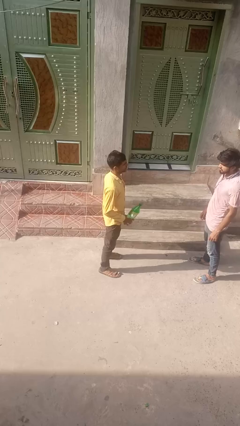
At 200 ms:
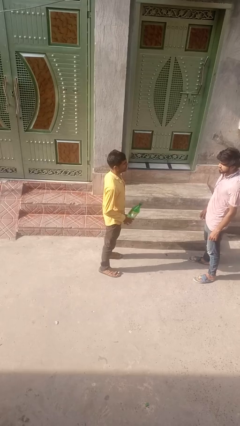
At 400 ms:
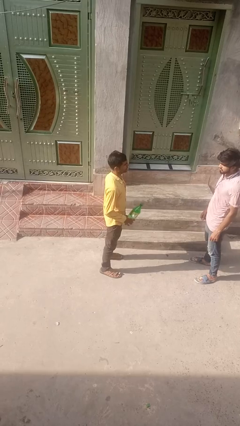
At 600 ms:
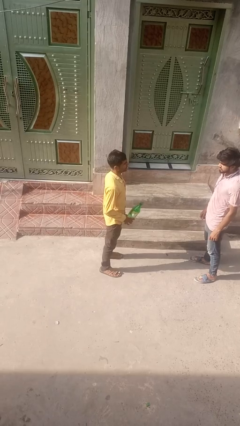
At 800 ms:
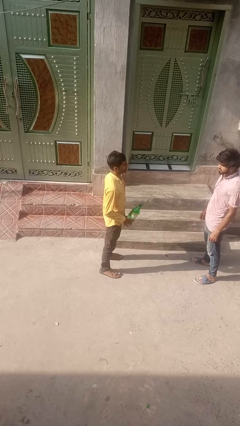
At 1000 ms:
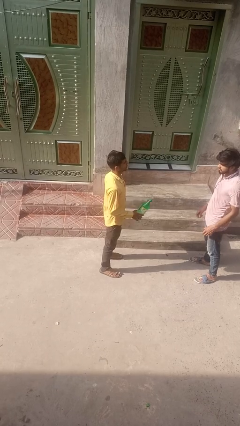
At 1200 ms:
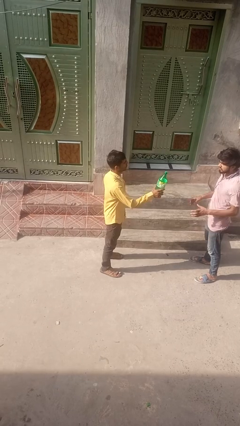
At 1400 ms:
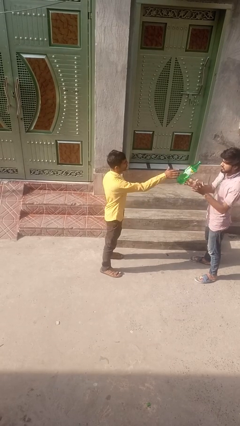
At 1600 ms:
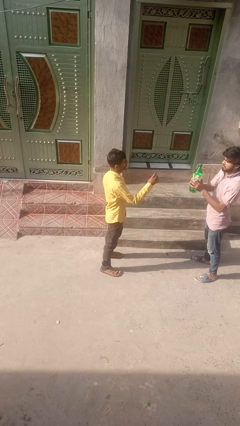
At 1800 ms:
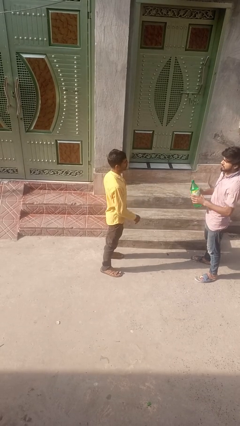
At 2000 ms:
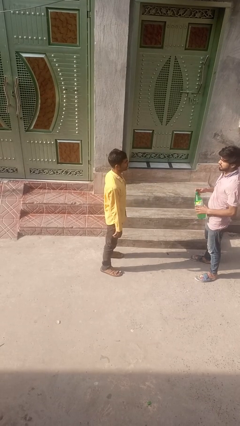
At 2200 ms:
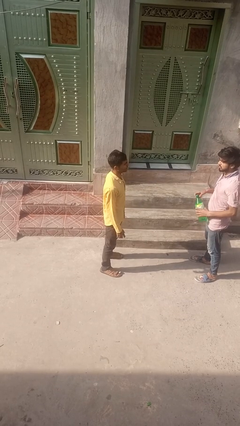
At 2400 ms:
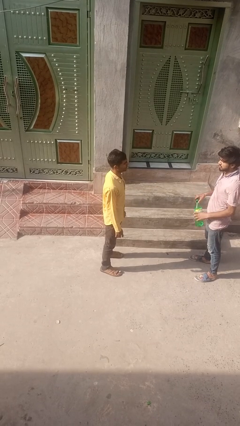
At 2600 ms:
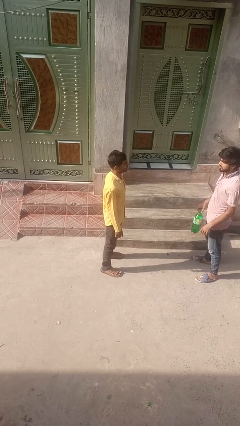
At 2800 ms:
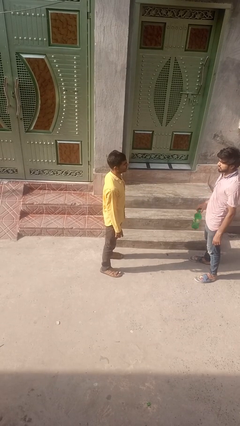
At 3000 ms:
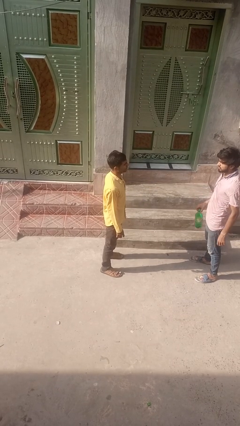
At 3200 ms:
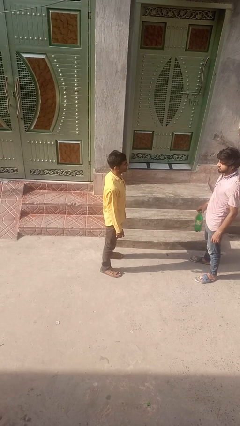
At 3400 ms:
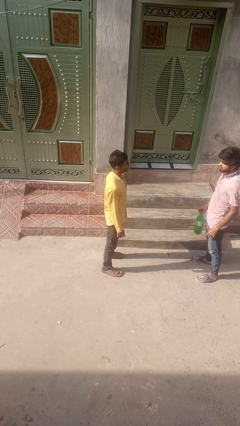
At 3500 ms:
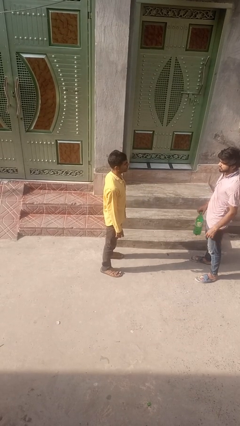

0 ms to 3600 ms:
person throws object to person

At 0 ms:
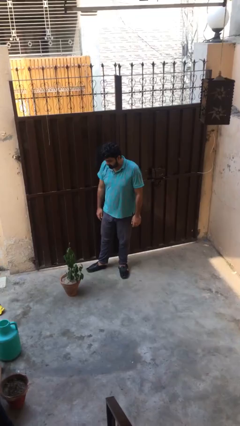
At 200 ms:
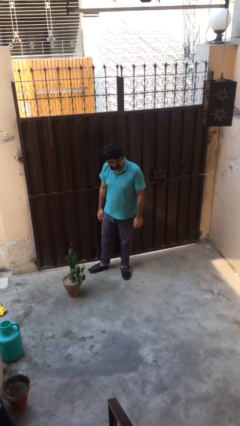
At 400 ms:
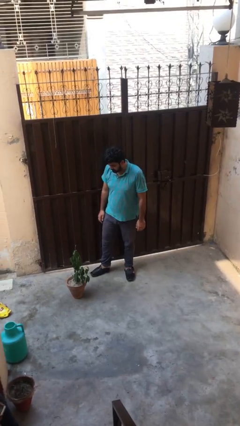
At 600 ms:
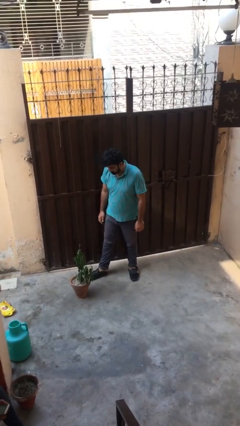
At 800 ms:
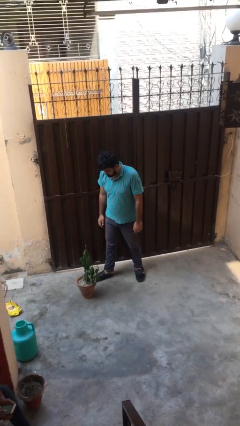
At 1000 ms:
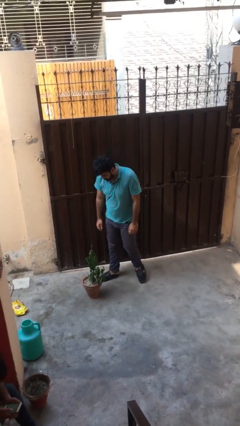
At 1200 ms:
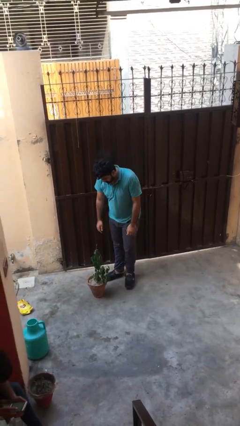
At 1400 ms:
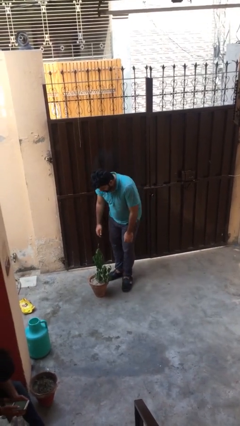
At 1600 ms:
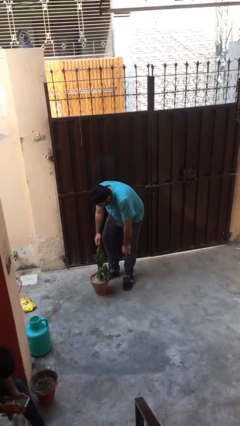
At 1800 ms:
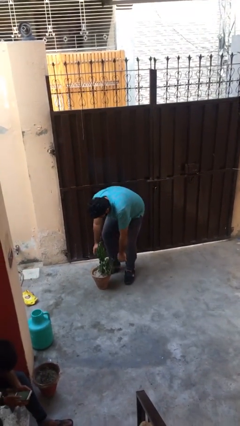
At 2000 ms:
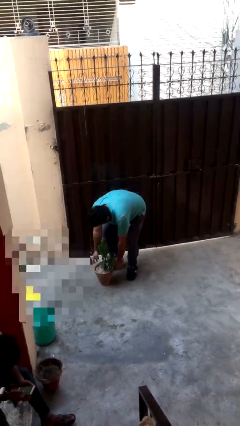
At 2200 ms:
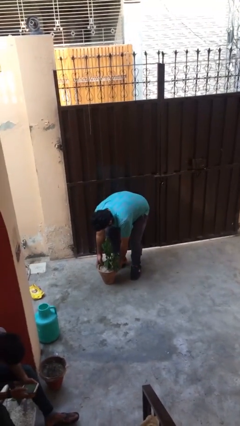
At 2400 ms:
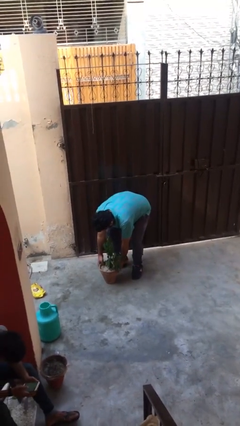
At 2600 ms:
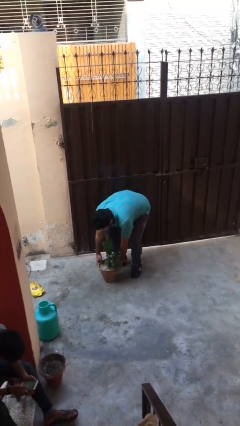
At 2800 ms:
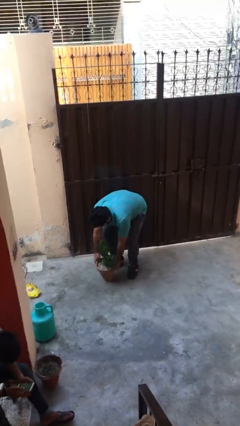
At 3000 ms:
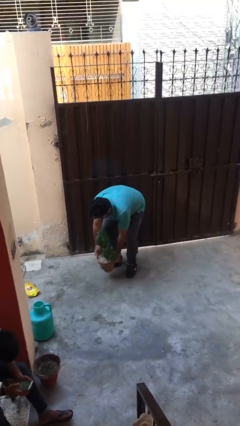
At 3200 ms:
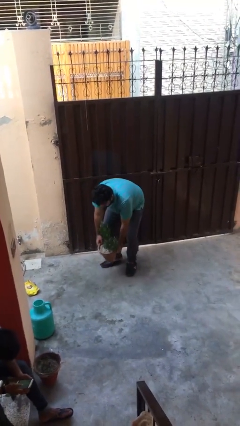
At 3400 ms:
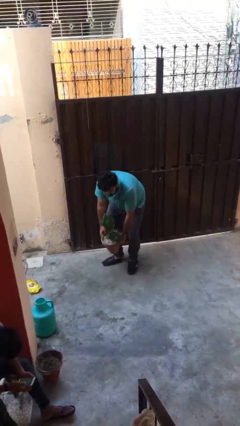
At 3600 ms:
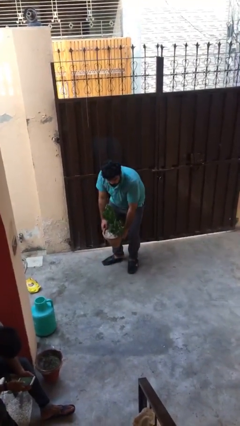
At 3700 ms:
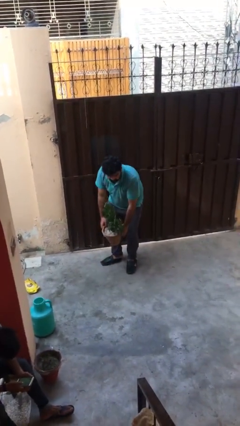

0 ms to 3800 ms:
person picks up object from floor

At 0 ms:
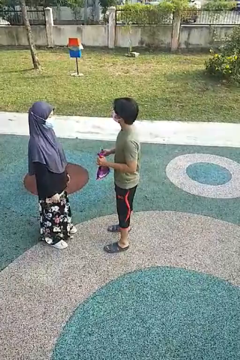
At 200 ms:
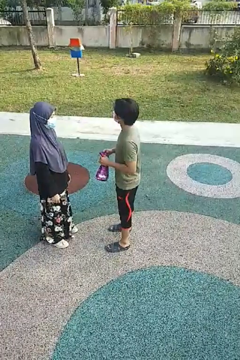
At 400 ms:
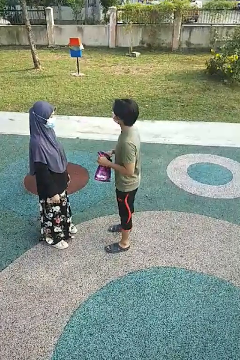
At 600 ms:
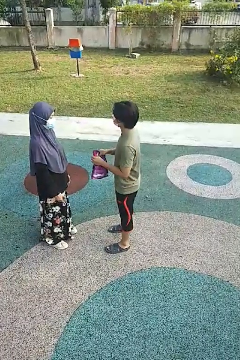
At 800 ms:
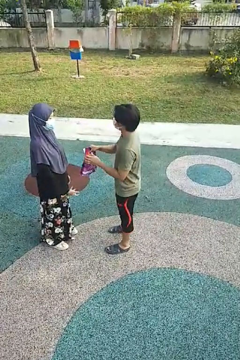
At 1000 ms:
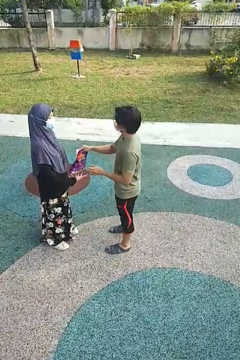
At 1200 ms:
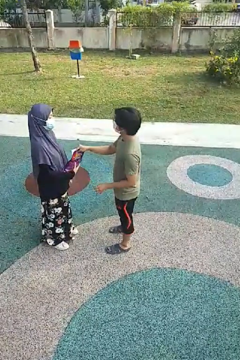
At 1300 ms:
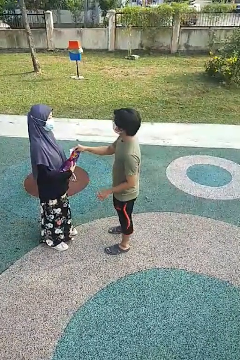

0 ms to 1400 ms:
person transfers object to person

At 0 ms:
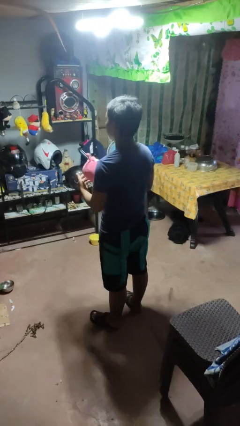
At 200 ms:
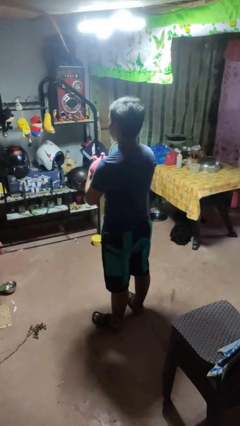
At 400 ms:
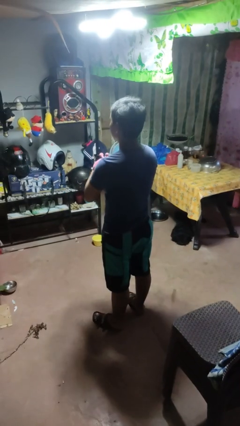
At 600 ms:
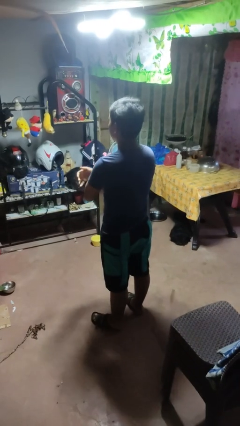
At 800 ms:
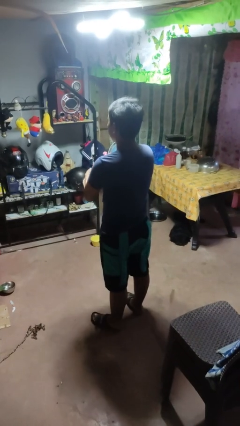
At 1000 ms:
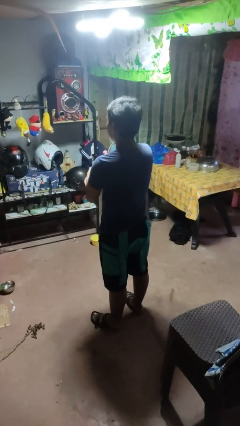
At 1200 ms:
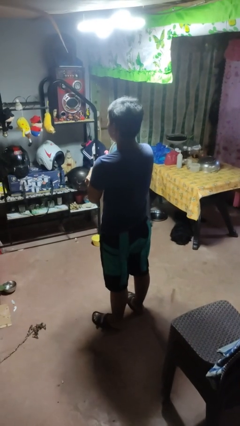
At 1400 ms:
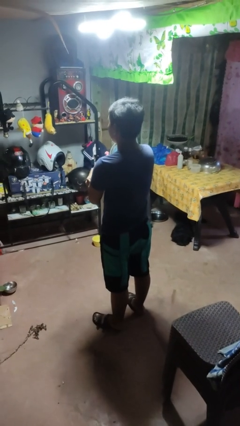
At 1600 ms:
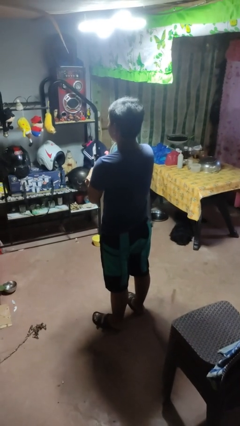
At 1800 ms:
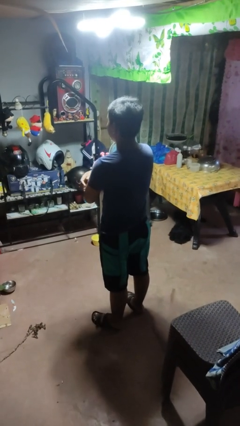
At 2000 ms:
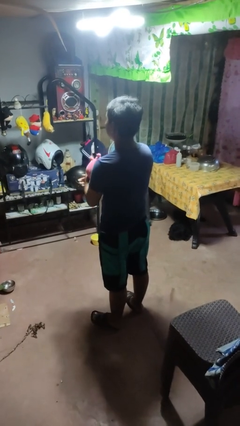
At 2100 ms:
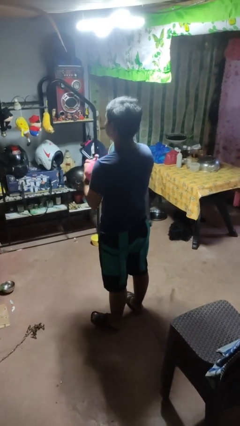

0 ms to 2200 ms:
person hugs stuffed animal

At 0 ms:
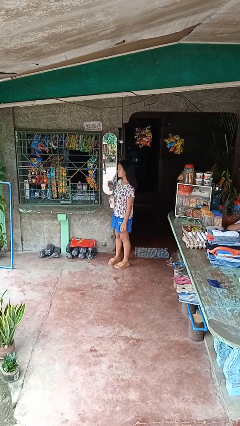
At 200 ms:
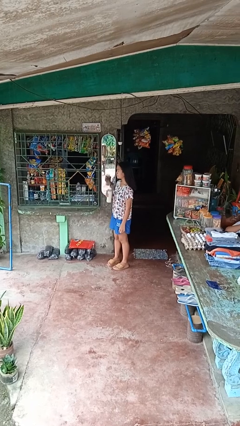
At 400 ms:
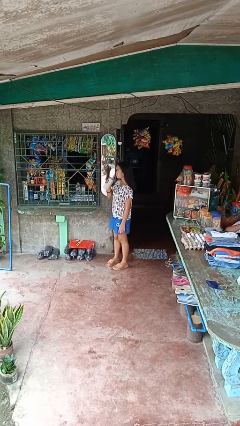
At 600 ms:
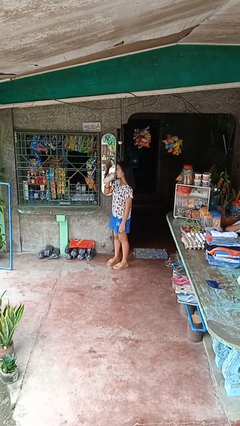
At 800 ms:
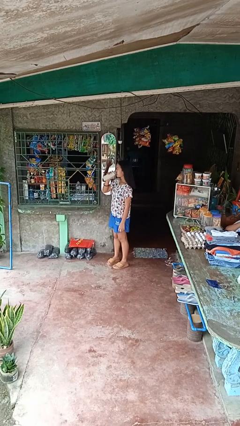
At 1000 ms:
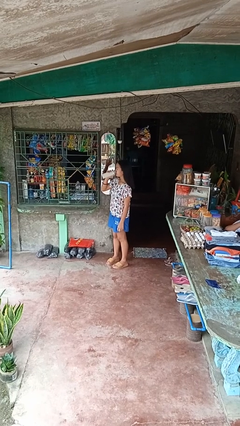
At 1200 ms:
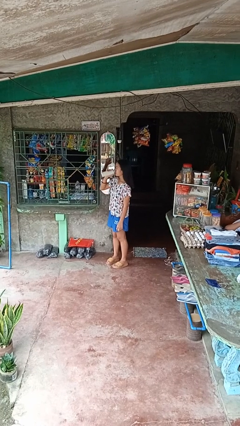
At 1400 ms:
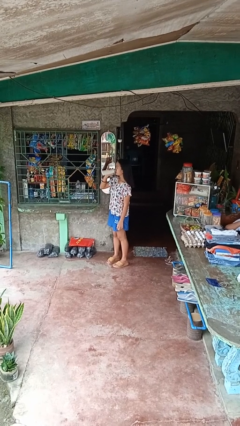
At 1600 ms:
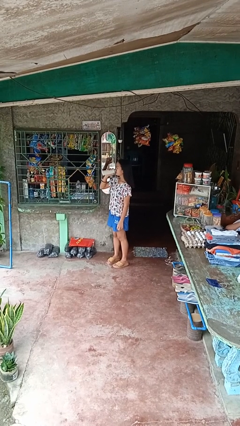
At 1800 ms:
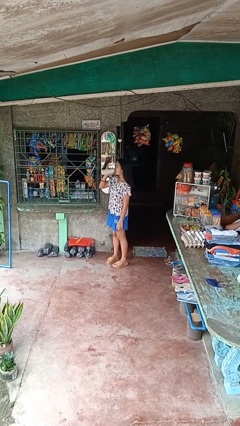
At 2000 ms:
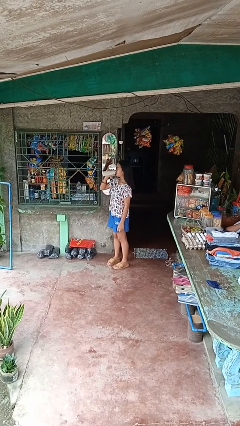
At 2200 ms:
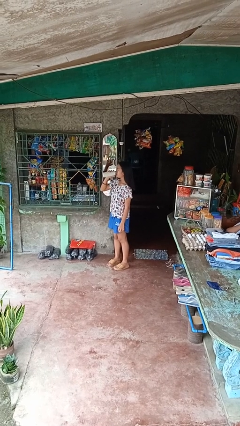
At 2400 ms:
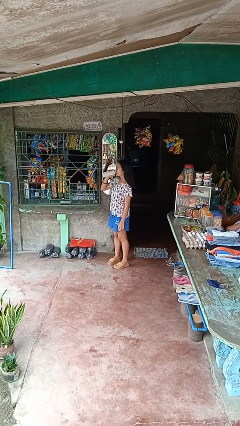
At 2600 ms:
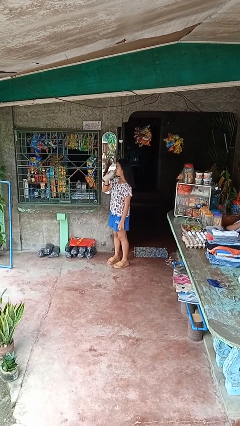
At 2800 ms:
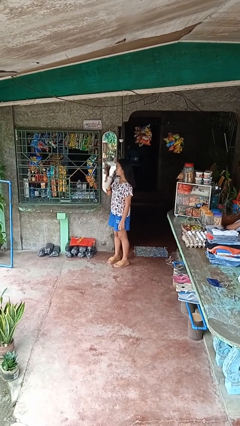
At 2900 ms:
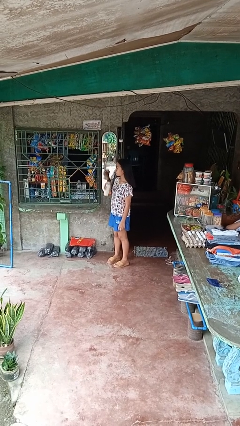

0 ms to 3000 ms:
person drinks from bottle

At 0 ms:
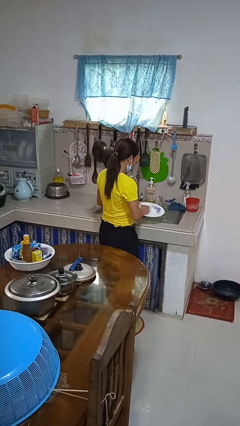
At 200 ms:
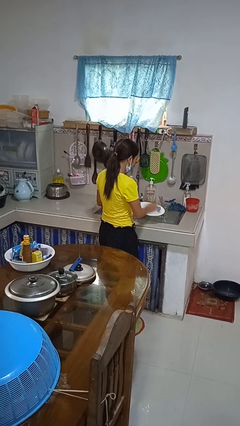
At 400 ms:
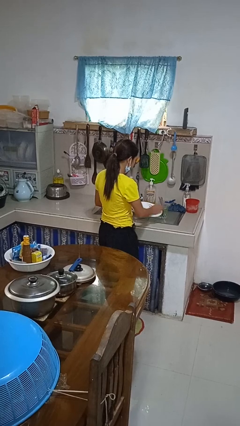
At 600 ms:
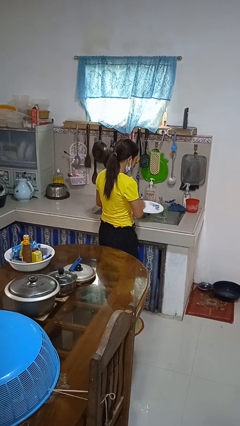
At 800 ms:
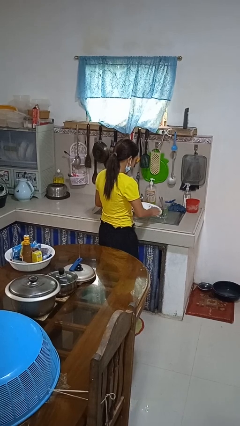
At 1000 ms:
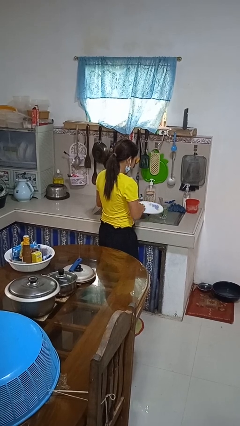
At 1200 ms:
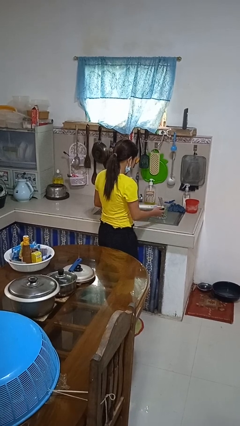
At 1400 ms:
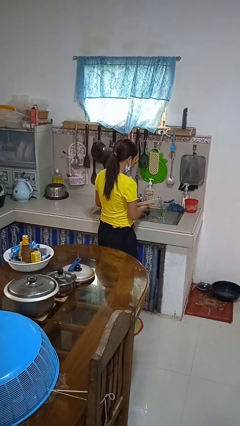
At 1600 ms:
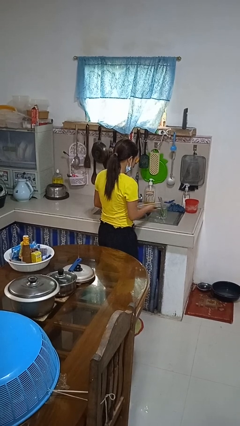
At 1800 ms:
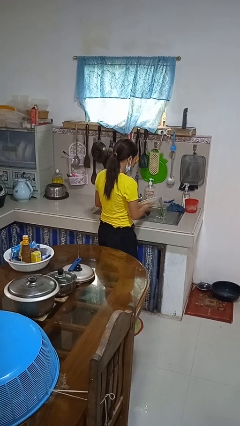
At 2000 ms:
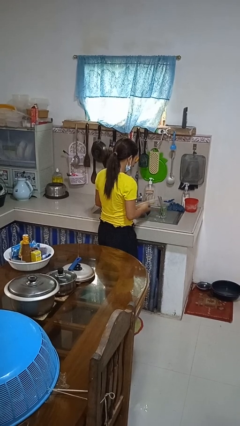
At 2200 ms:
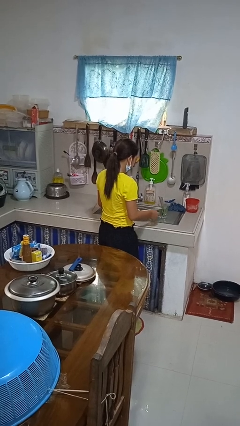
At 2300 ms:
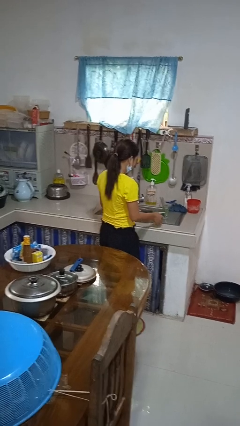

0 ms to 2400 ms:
person washes dish

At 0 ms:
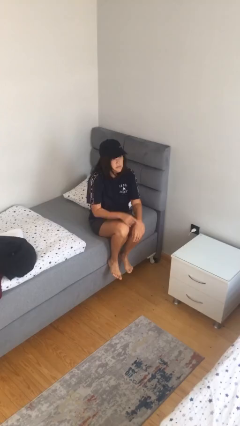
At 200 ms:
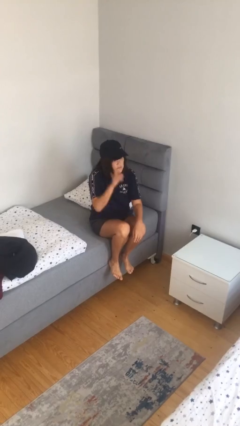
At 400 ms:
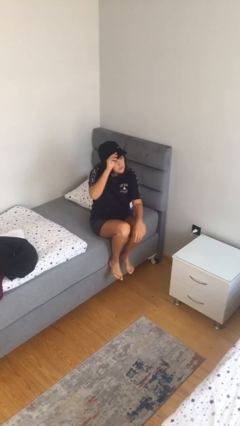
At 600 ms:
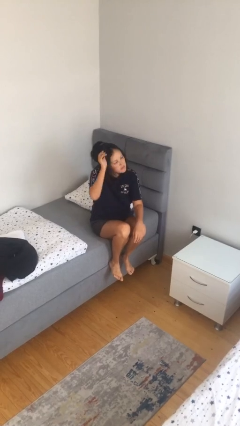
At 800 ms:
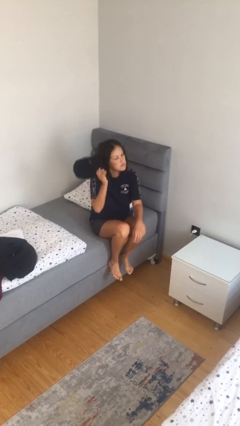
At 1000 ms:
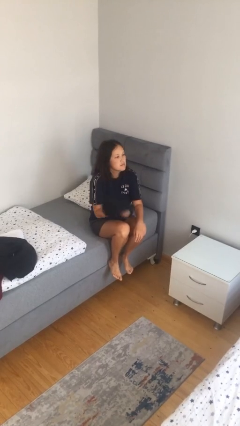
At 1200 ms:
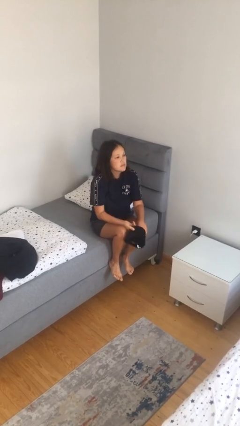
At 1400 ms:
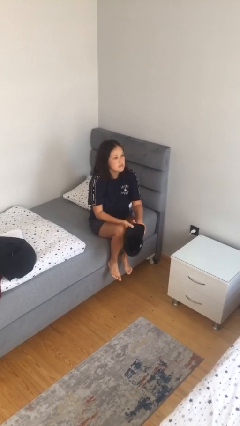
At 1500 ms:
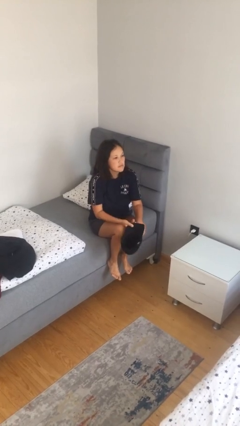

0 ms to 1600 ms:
person takes off hat
